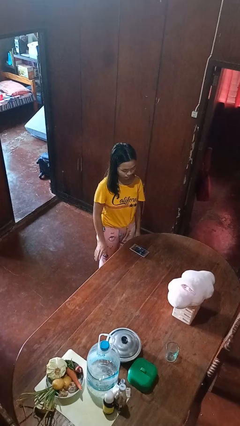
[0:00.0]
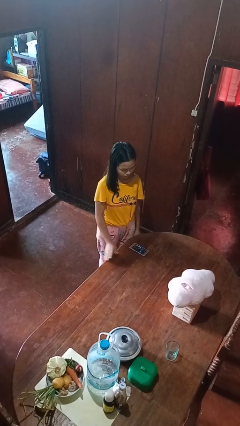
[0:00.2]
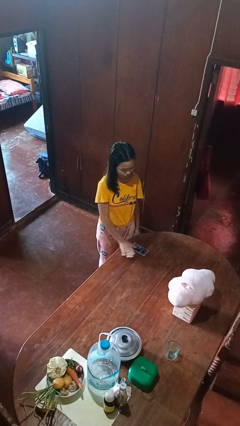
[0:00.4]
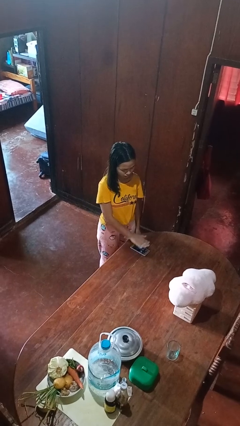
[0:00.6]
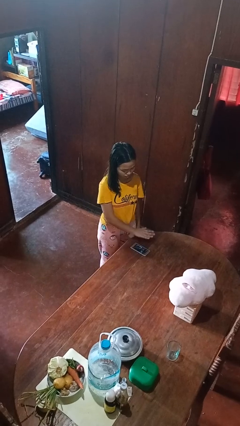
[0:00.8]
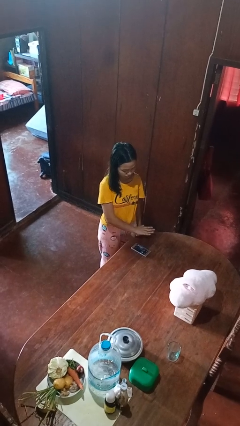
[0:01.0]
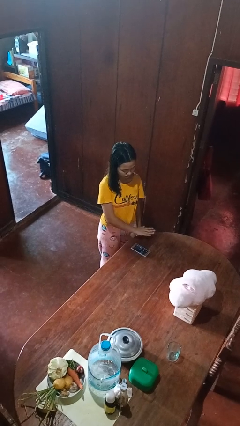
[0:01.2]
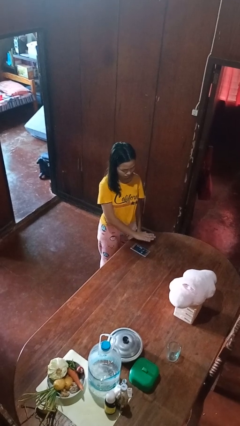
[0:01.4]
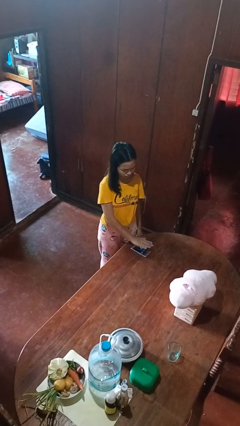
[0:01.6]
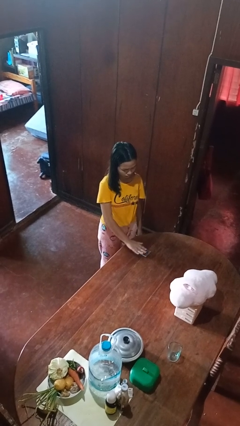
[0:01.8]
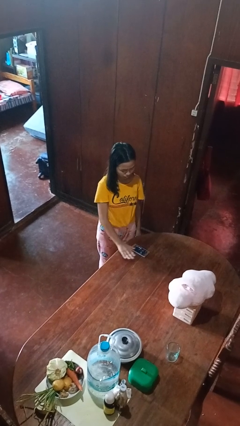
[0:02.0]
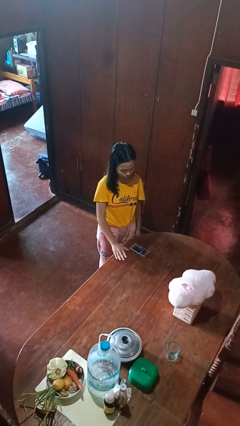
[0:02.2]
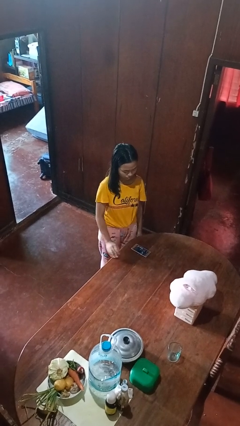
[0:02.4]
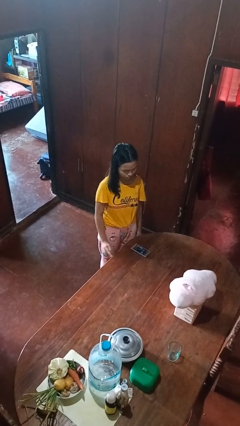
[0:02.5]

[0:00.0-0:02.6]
person waves hand over object

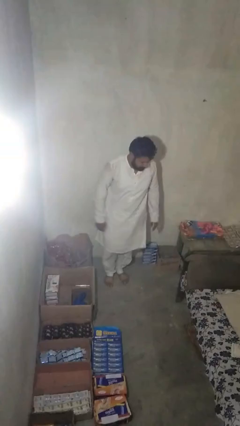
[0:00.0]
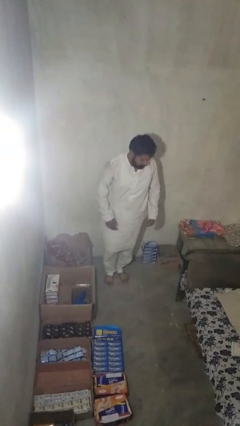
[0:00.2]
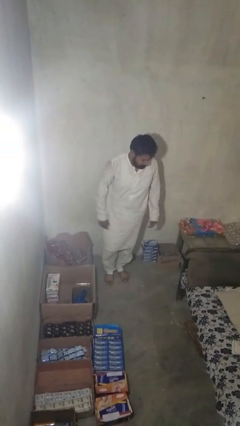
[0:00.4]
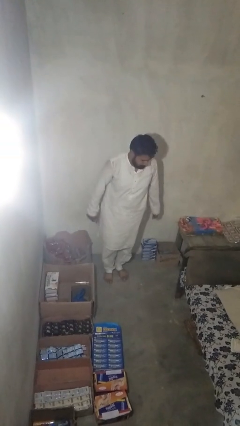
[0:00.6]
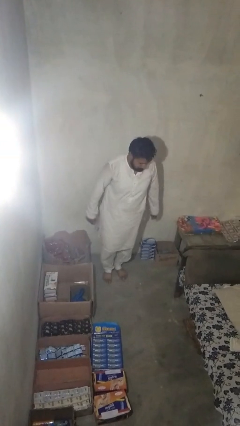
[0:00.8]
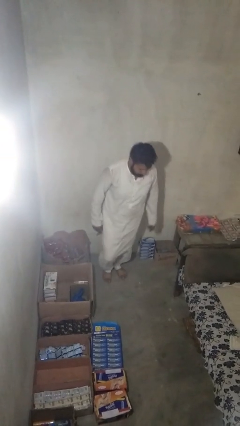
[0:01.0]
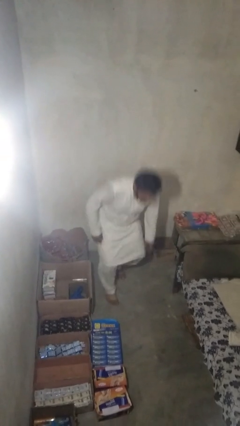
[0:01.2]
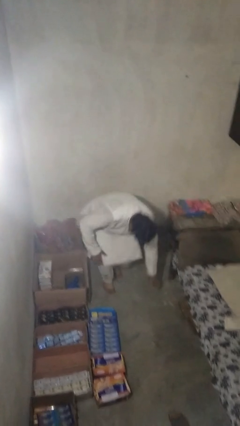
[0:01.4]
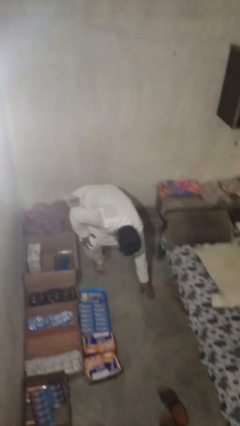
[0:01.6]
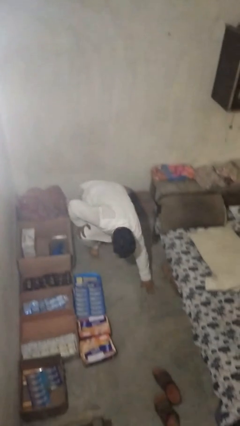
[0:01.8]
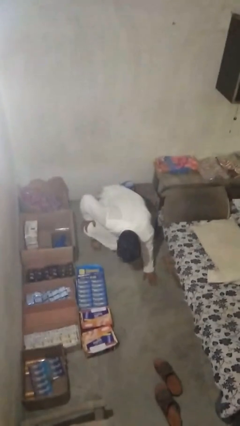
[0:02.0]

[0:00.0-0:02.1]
person trips on object on floor

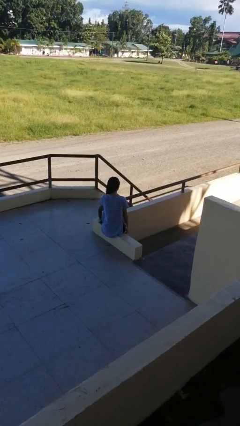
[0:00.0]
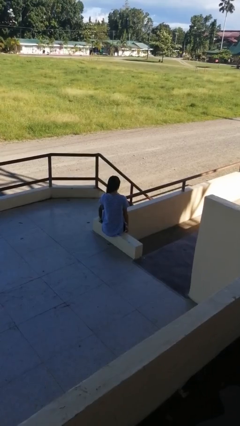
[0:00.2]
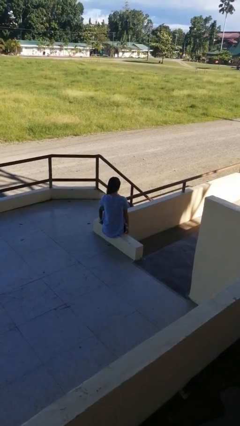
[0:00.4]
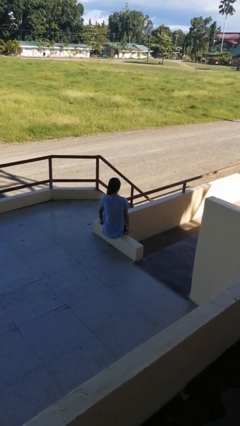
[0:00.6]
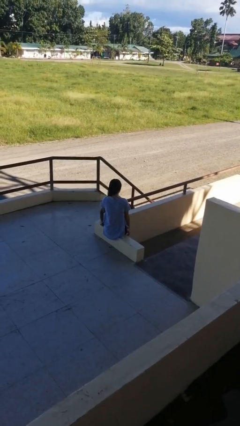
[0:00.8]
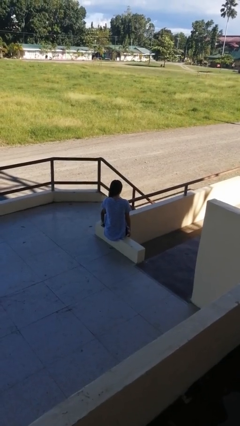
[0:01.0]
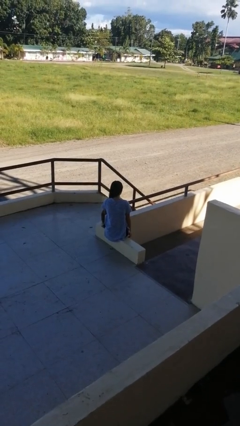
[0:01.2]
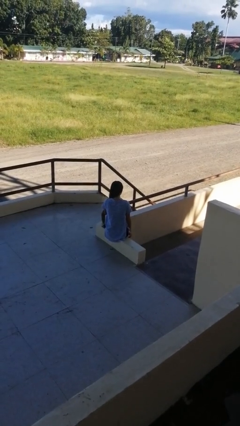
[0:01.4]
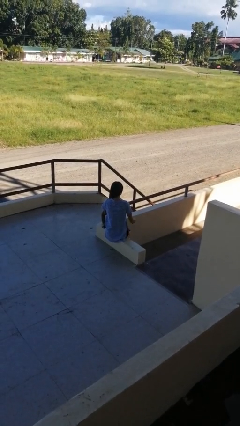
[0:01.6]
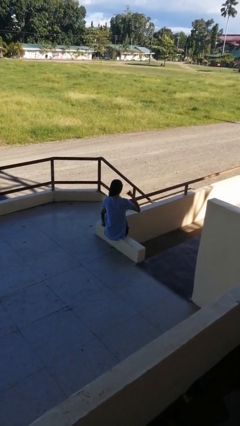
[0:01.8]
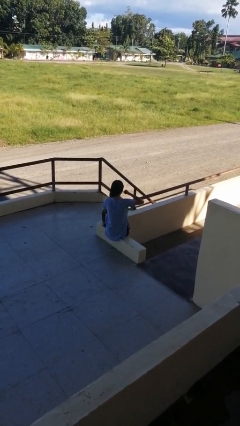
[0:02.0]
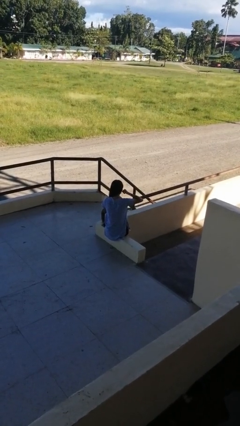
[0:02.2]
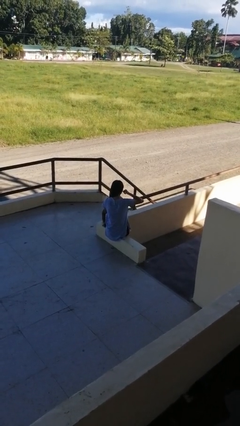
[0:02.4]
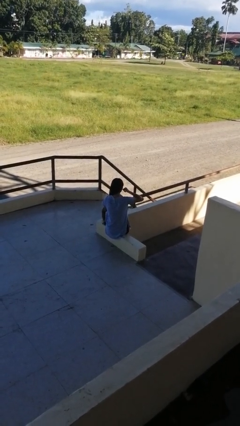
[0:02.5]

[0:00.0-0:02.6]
person gestures call me

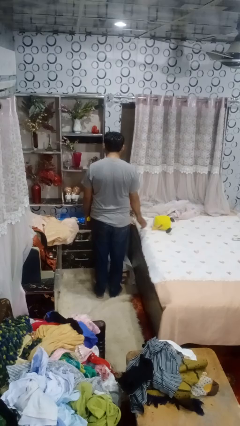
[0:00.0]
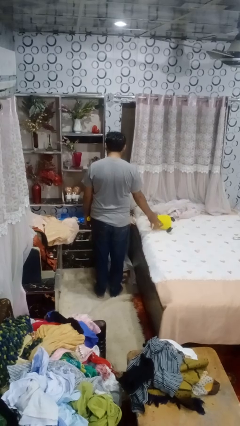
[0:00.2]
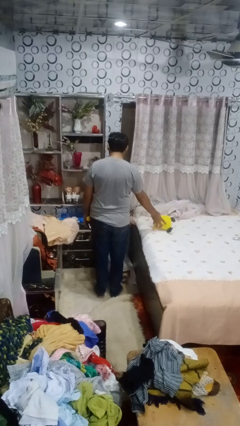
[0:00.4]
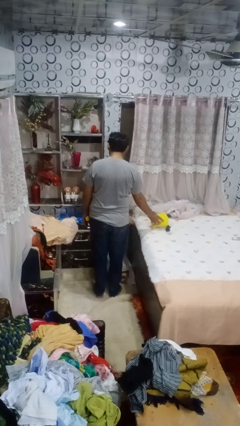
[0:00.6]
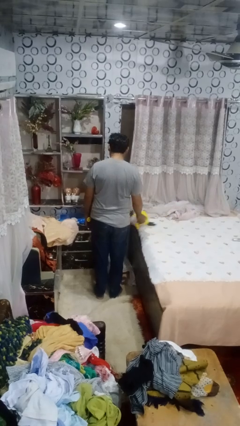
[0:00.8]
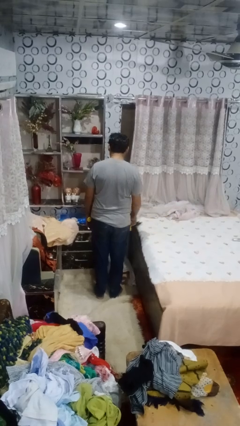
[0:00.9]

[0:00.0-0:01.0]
person picks up object from bed

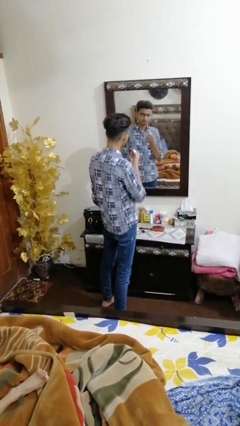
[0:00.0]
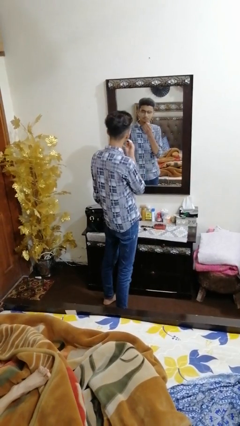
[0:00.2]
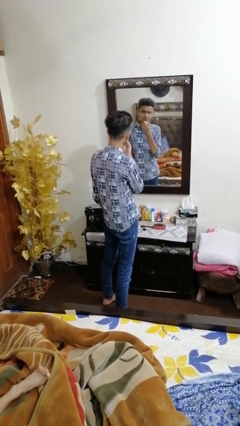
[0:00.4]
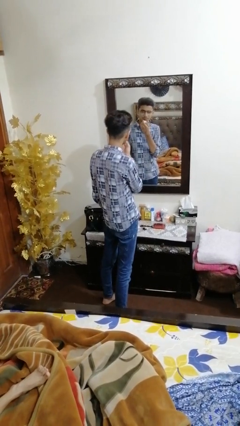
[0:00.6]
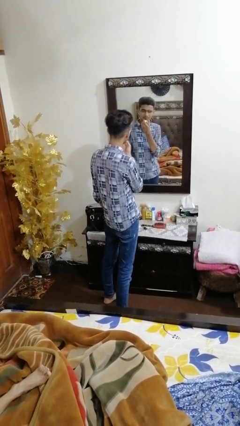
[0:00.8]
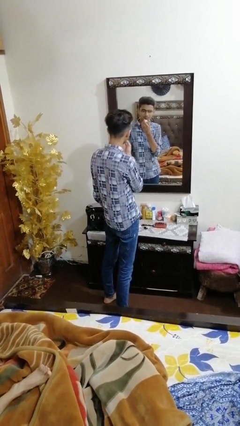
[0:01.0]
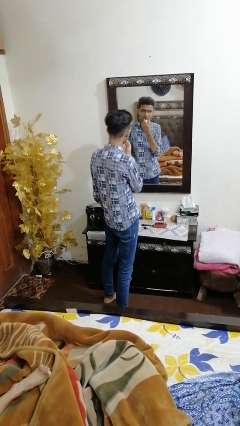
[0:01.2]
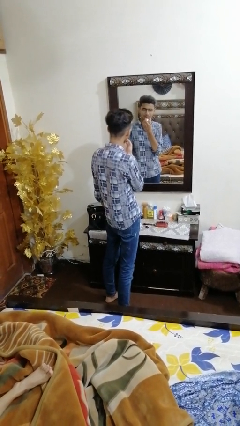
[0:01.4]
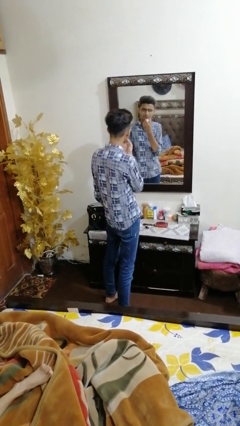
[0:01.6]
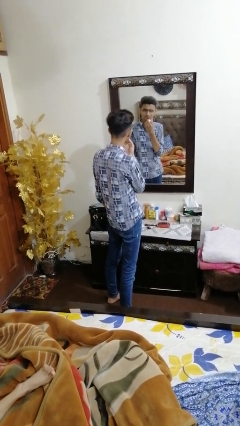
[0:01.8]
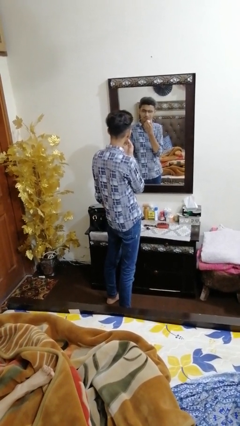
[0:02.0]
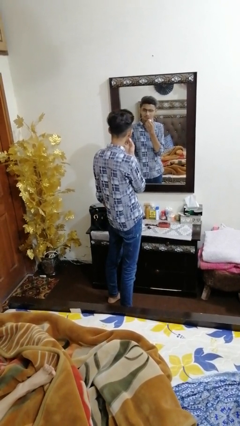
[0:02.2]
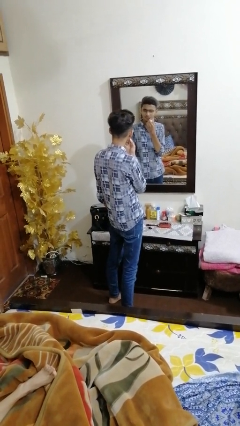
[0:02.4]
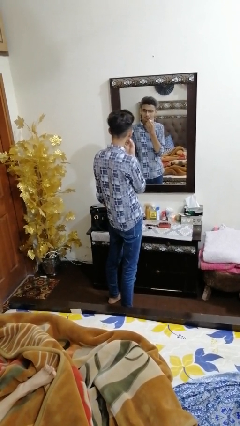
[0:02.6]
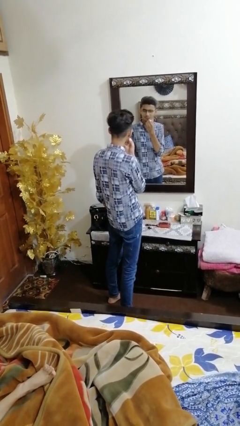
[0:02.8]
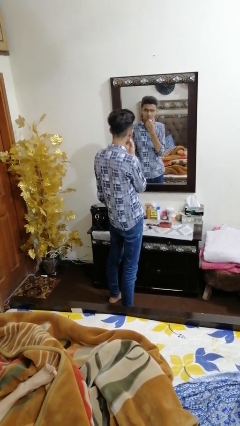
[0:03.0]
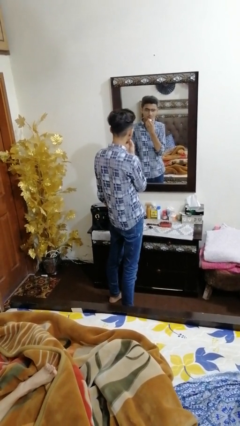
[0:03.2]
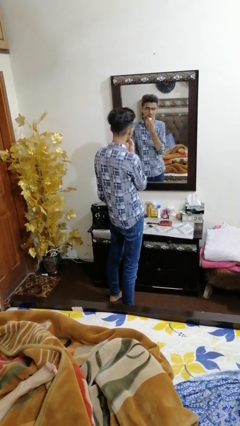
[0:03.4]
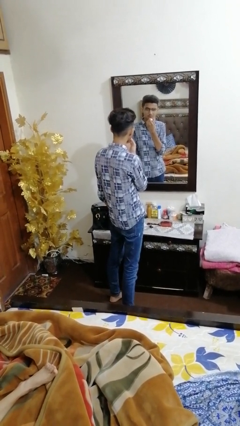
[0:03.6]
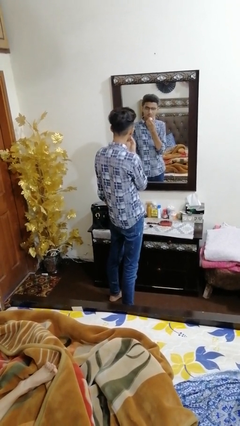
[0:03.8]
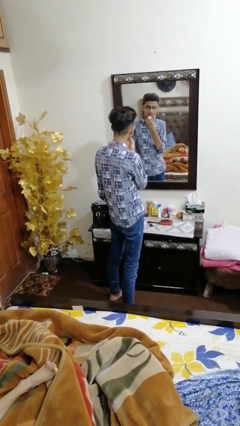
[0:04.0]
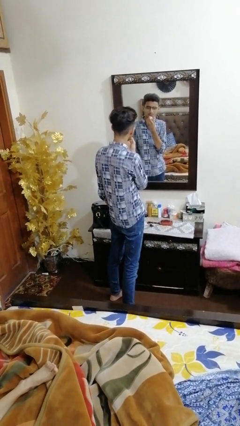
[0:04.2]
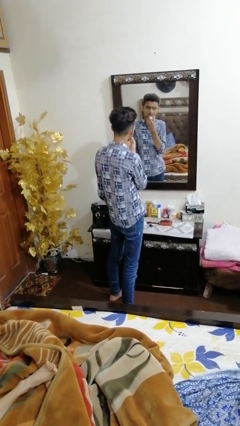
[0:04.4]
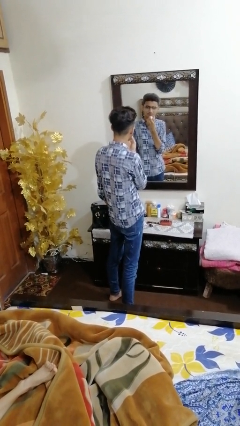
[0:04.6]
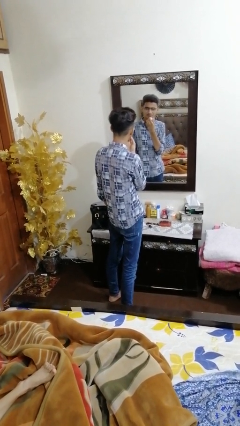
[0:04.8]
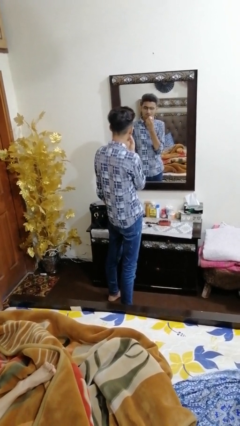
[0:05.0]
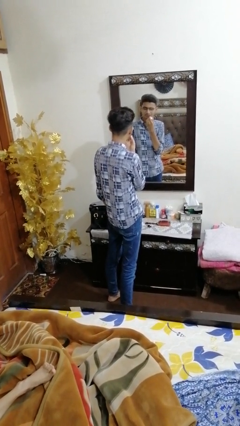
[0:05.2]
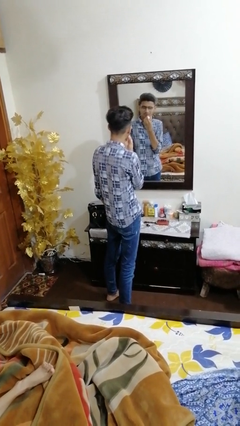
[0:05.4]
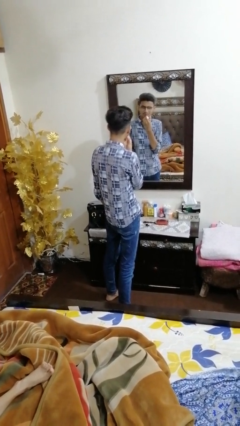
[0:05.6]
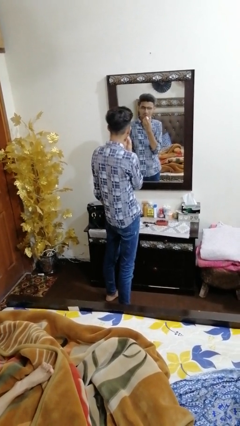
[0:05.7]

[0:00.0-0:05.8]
person applies lip makeup

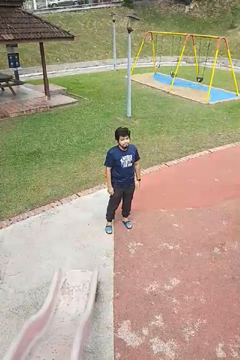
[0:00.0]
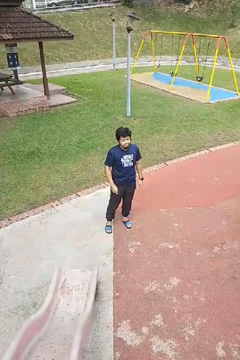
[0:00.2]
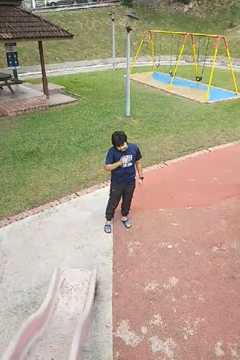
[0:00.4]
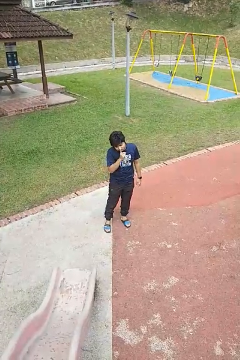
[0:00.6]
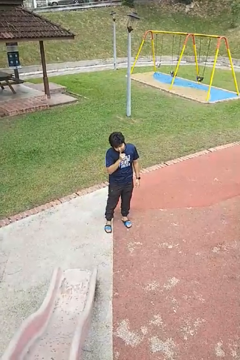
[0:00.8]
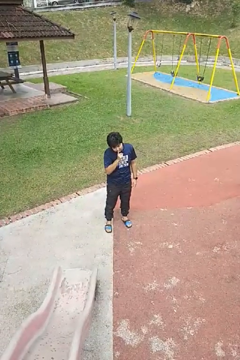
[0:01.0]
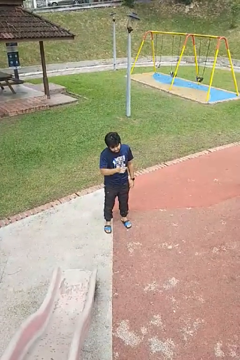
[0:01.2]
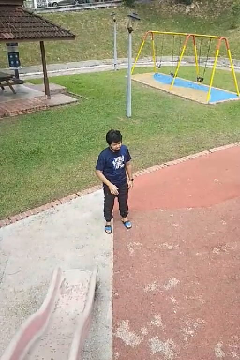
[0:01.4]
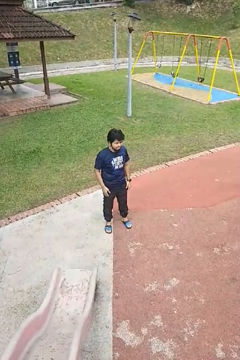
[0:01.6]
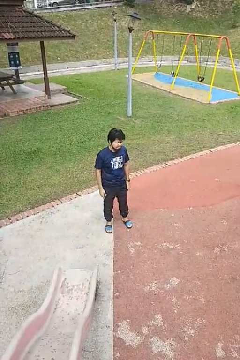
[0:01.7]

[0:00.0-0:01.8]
person gestures be quiet

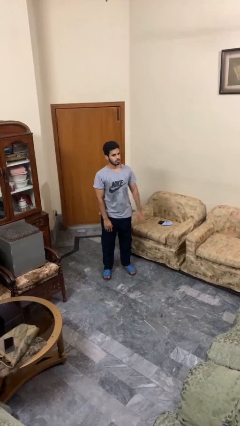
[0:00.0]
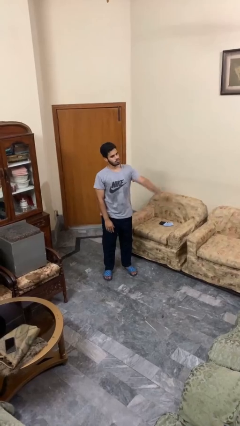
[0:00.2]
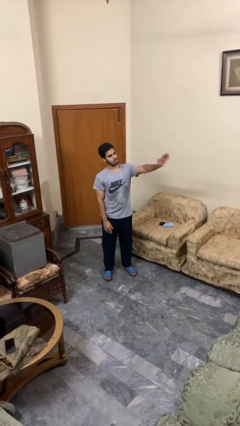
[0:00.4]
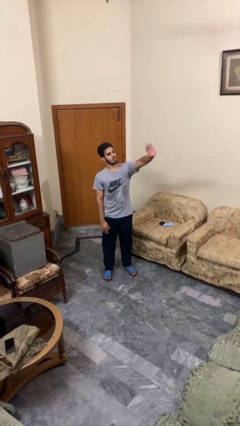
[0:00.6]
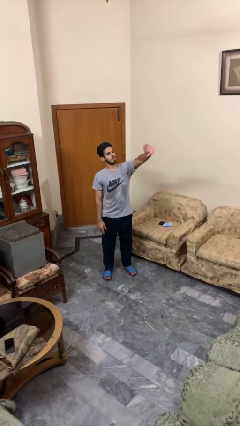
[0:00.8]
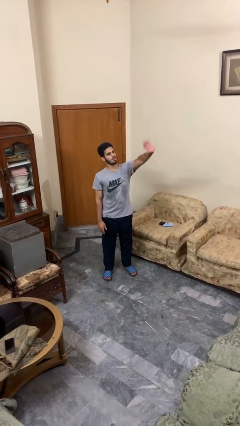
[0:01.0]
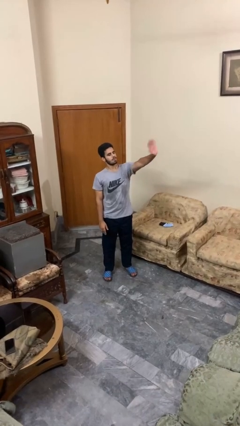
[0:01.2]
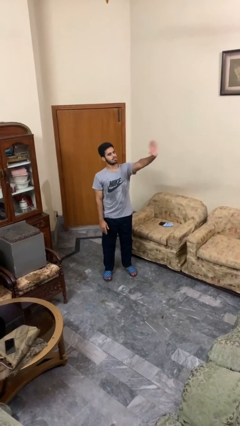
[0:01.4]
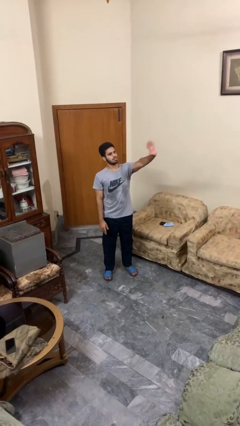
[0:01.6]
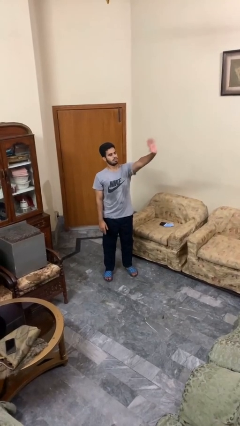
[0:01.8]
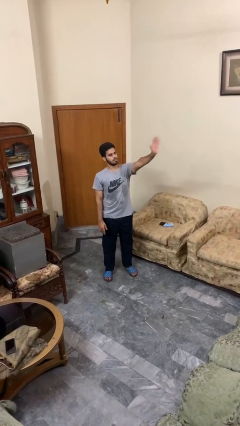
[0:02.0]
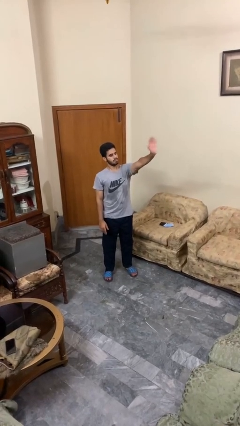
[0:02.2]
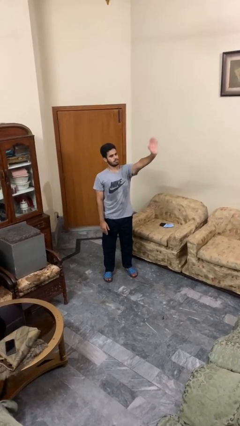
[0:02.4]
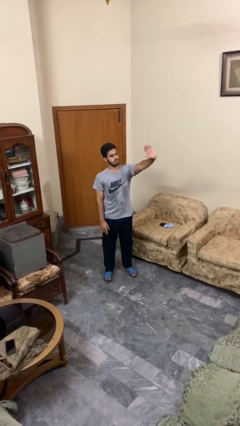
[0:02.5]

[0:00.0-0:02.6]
person waves at person
